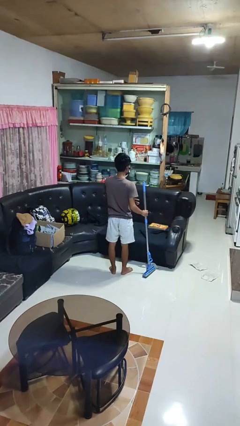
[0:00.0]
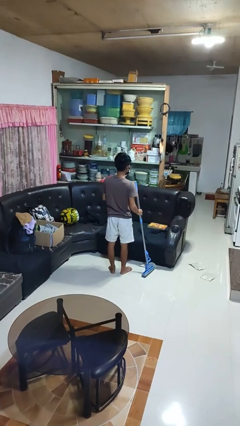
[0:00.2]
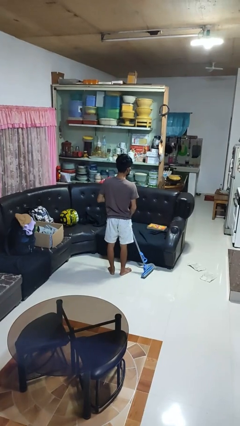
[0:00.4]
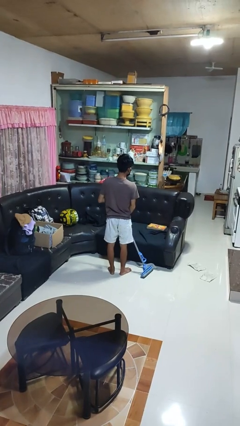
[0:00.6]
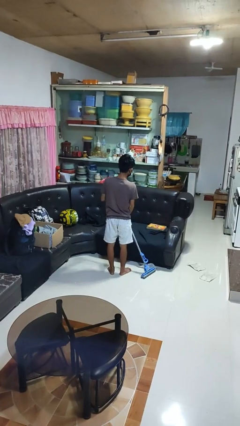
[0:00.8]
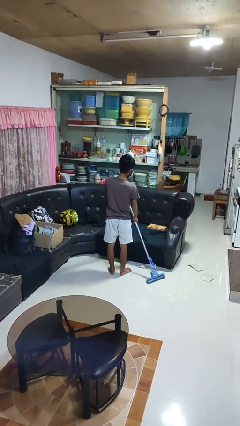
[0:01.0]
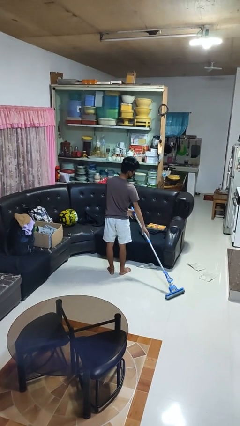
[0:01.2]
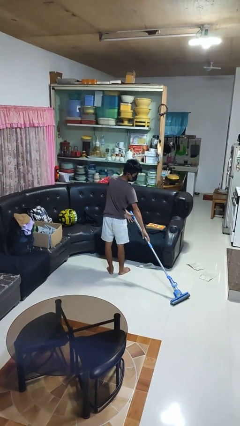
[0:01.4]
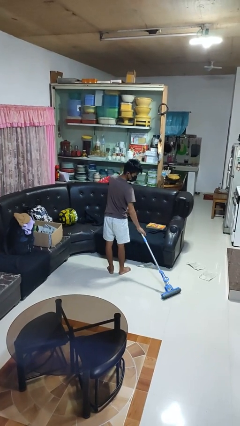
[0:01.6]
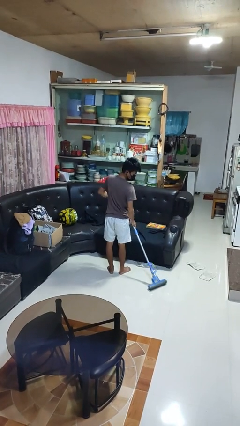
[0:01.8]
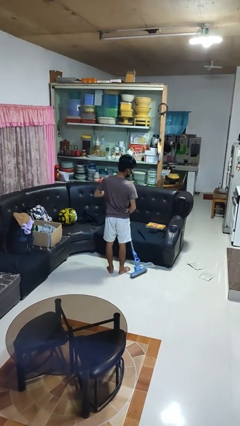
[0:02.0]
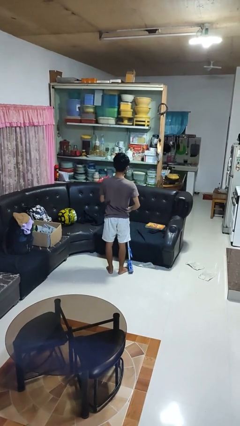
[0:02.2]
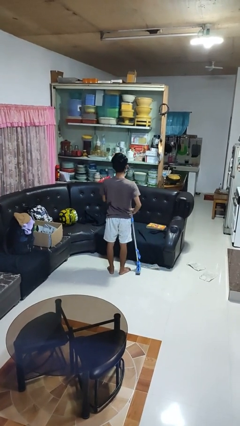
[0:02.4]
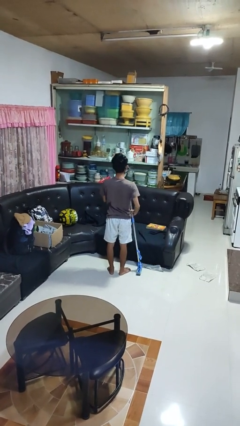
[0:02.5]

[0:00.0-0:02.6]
person mops

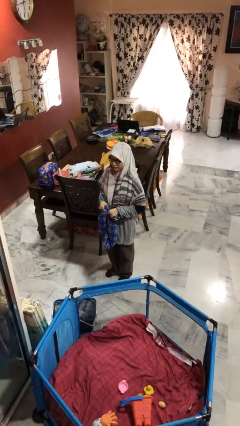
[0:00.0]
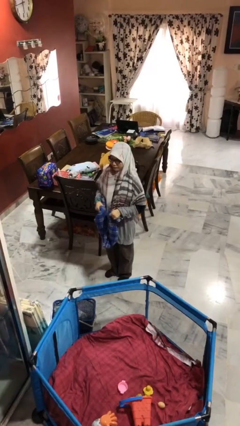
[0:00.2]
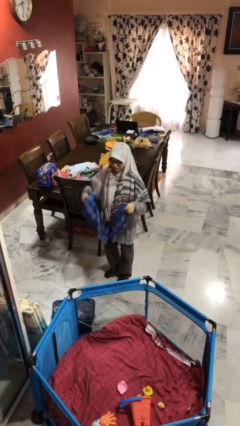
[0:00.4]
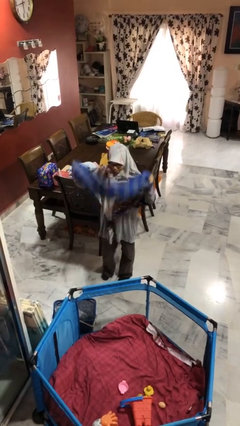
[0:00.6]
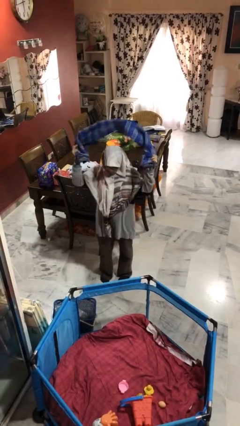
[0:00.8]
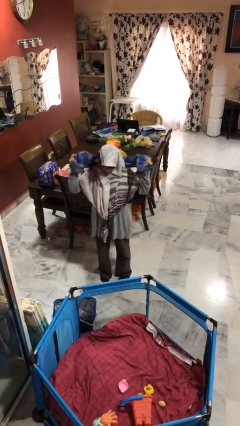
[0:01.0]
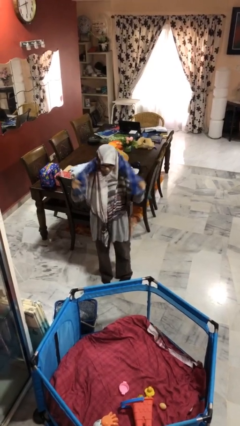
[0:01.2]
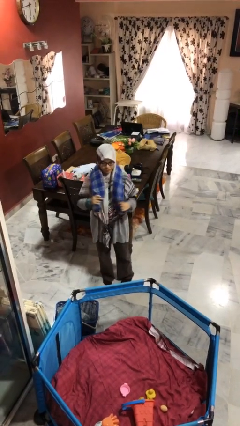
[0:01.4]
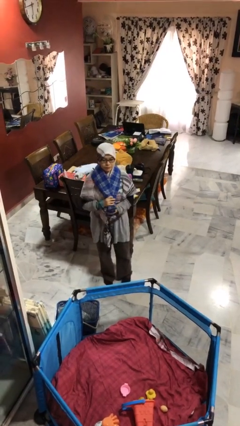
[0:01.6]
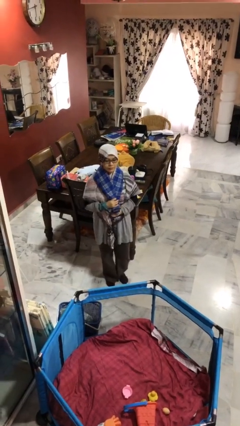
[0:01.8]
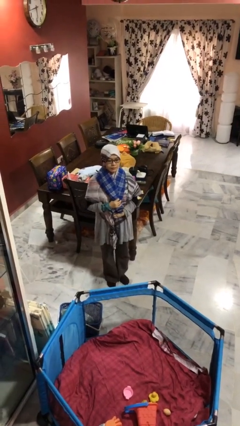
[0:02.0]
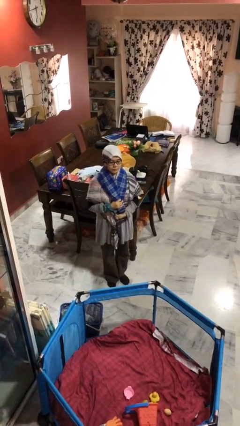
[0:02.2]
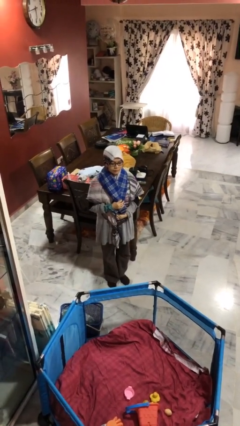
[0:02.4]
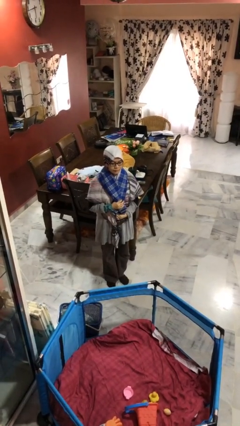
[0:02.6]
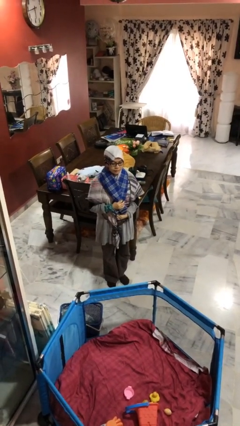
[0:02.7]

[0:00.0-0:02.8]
person puts on scarf

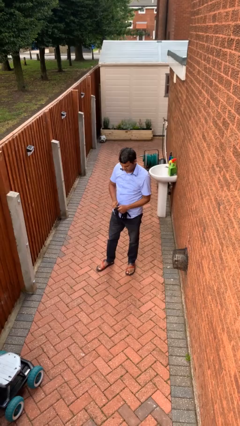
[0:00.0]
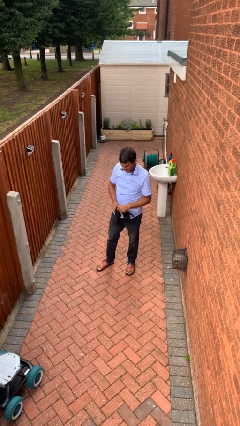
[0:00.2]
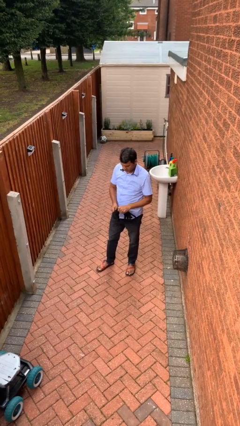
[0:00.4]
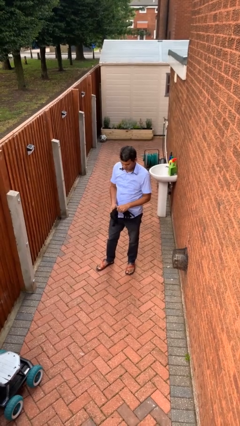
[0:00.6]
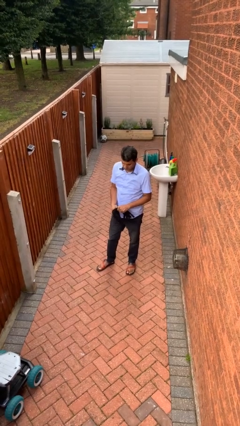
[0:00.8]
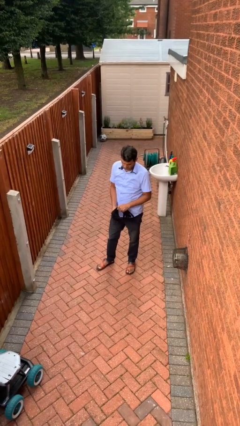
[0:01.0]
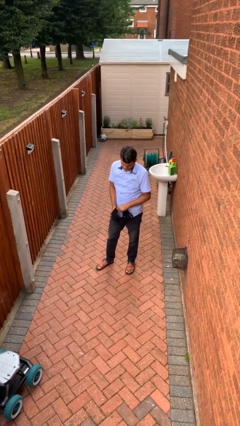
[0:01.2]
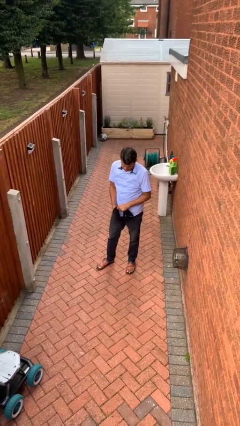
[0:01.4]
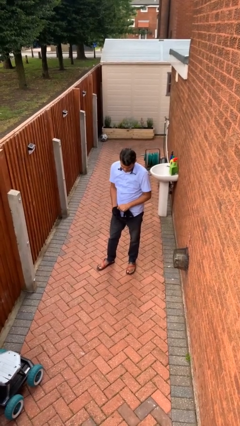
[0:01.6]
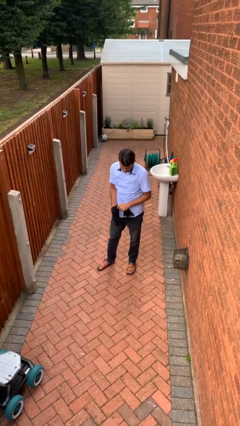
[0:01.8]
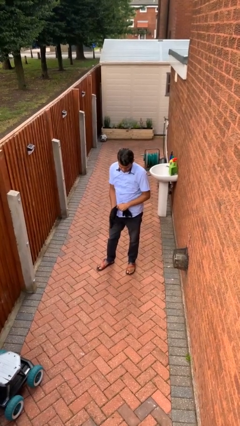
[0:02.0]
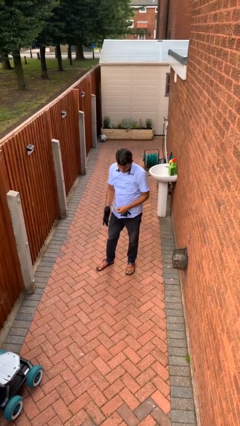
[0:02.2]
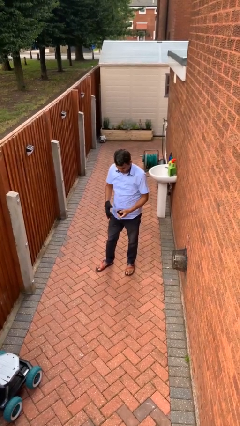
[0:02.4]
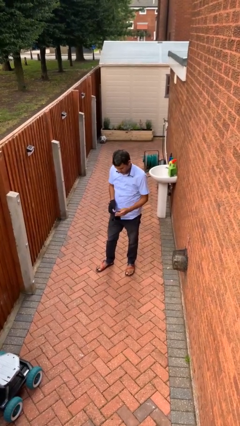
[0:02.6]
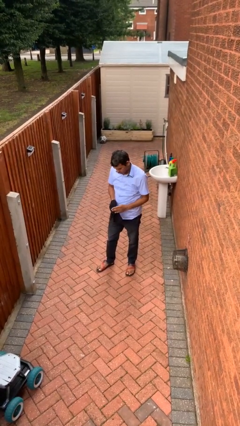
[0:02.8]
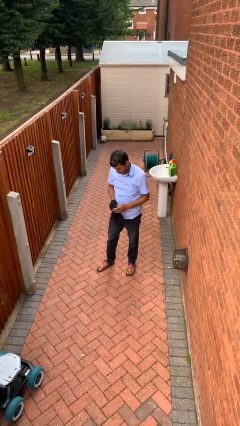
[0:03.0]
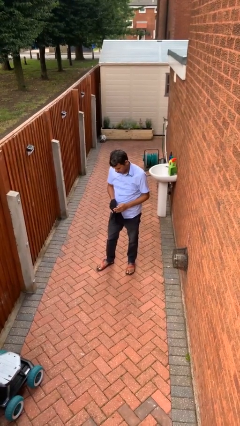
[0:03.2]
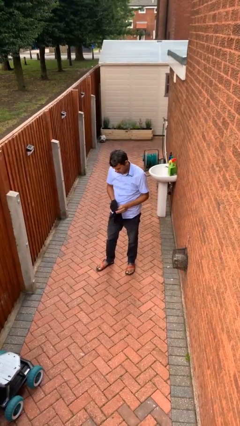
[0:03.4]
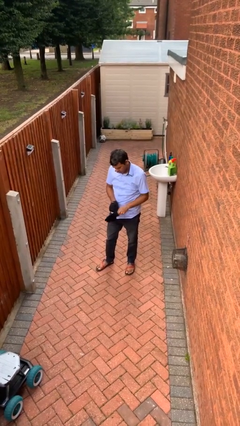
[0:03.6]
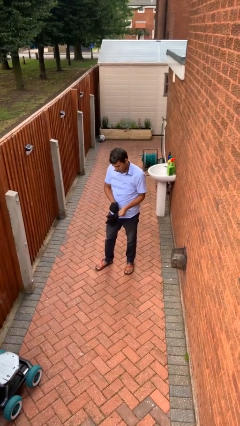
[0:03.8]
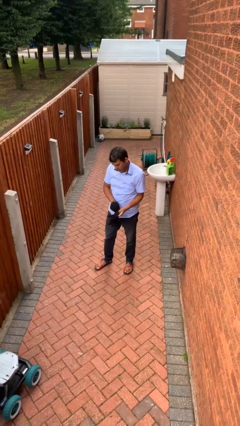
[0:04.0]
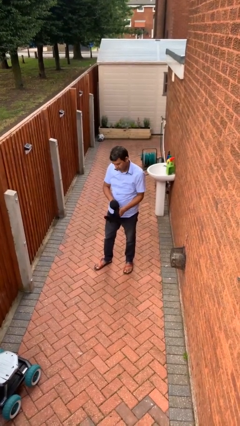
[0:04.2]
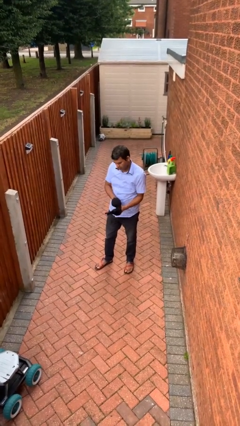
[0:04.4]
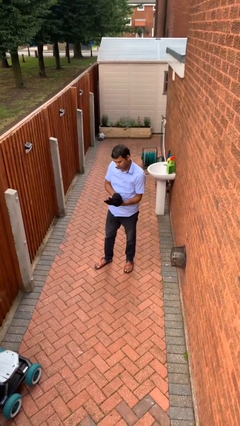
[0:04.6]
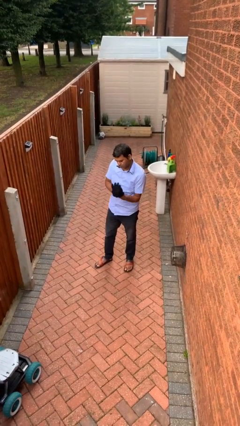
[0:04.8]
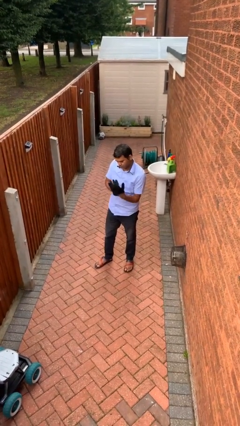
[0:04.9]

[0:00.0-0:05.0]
person puts on gloves

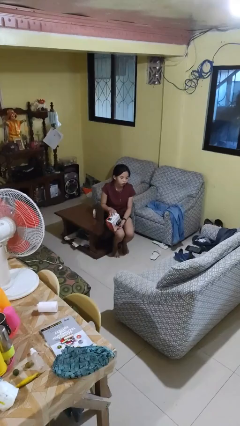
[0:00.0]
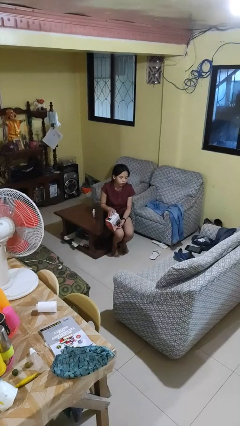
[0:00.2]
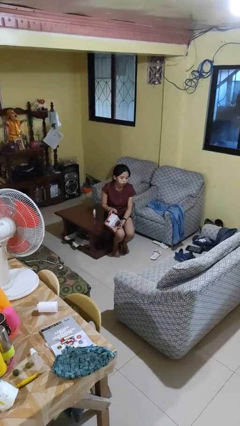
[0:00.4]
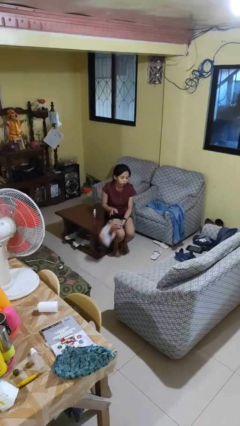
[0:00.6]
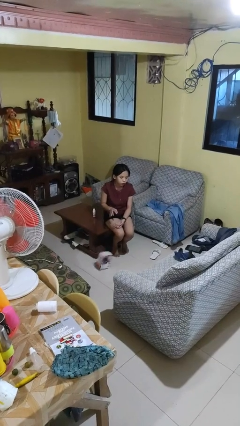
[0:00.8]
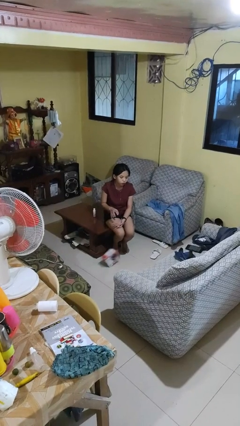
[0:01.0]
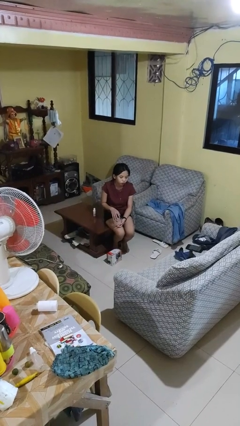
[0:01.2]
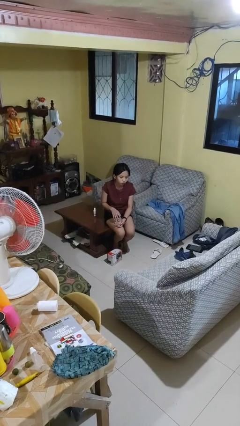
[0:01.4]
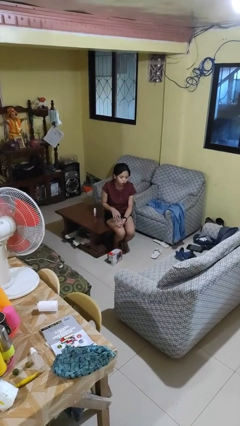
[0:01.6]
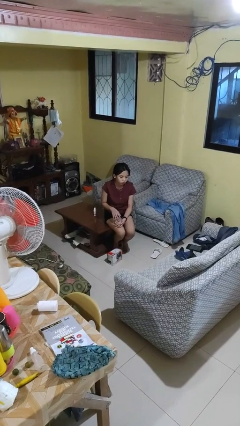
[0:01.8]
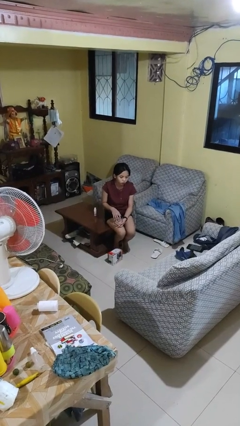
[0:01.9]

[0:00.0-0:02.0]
person drops object

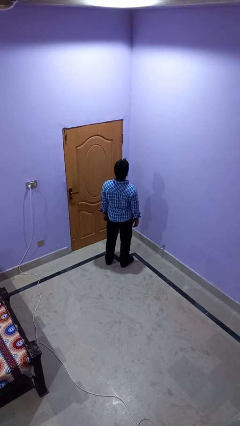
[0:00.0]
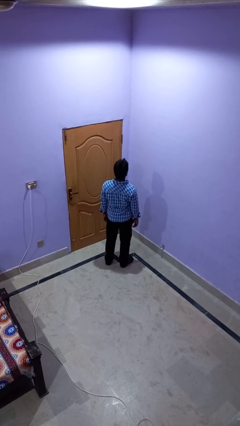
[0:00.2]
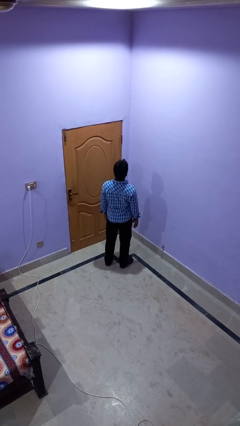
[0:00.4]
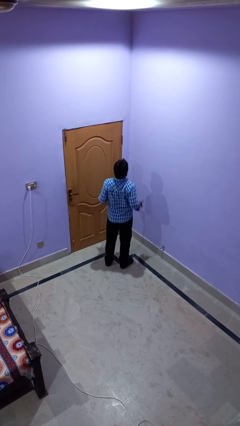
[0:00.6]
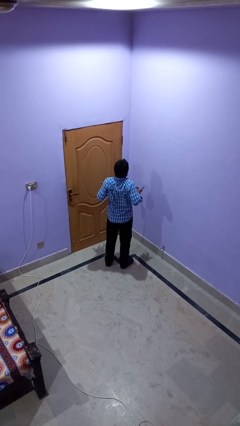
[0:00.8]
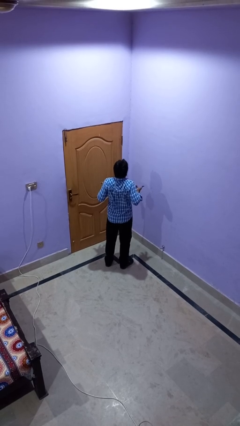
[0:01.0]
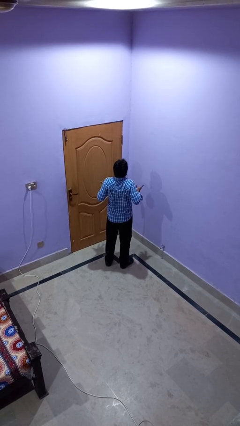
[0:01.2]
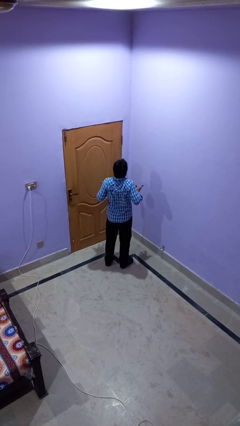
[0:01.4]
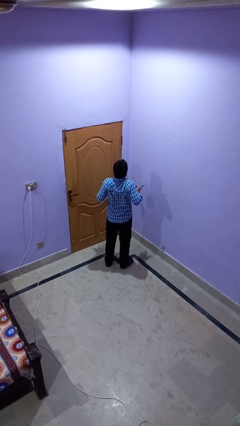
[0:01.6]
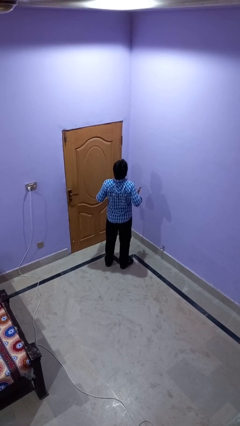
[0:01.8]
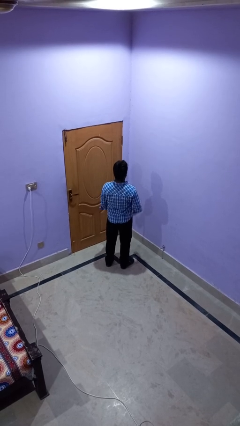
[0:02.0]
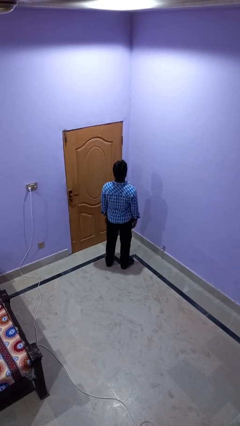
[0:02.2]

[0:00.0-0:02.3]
person shrugs

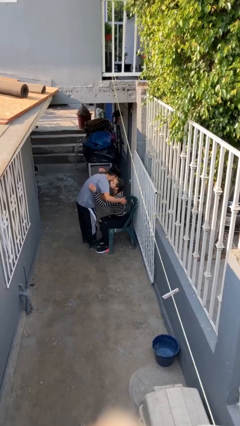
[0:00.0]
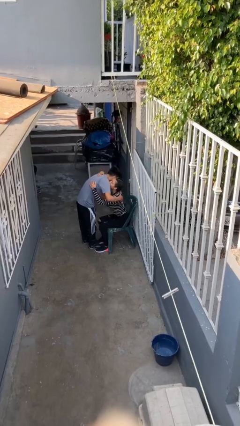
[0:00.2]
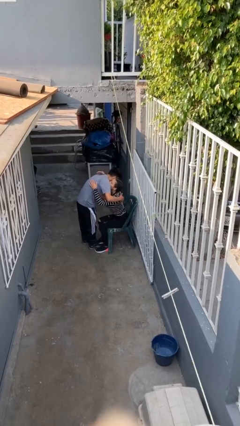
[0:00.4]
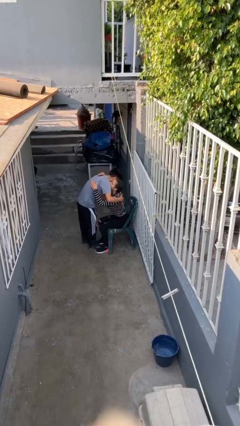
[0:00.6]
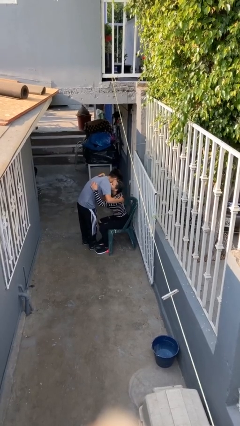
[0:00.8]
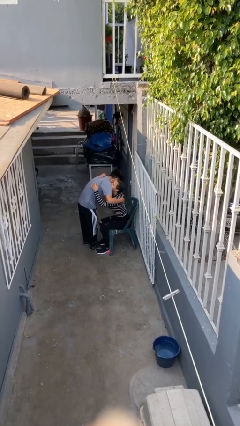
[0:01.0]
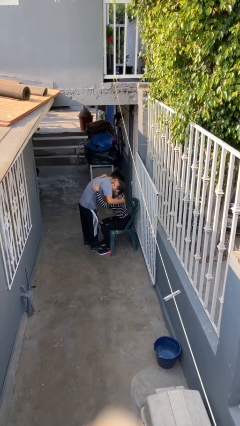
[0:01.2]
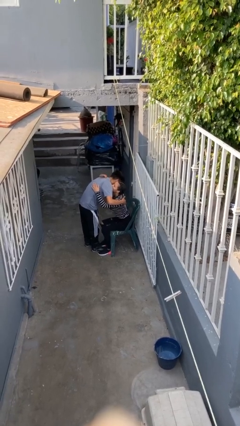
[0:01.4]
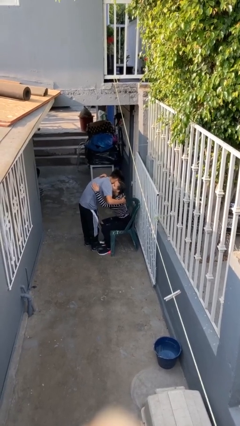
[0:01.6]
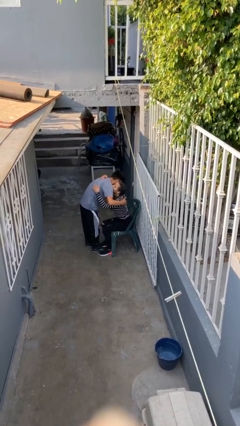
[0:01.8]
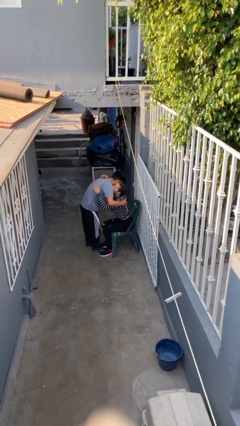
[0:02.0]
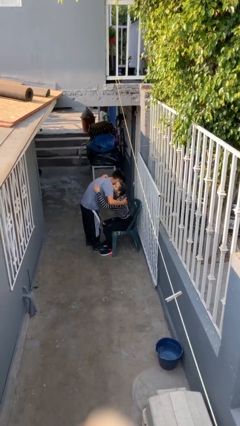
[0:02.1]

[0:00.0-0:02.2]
person embraces person

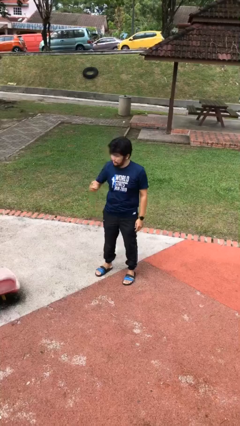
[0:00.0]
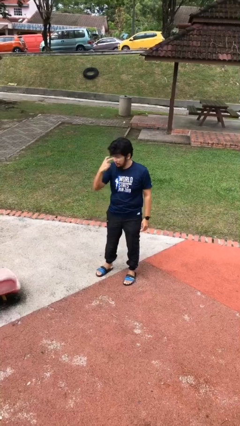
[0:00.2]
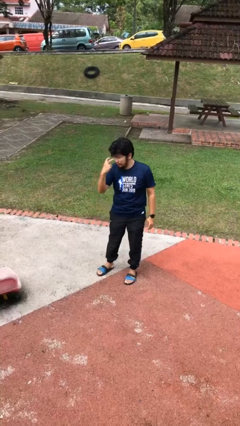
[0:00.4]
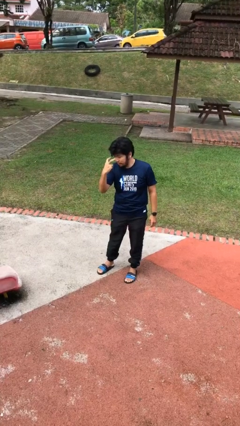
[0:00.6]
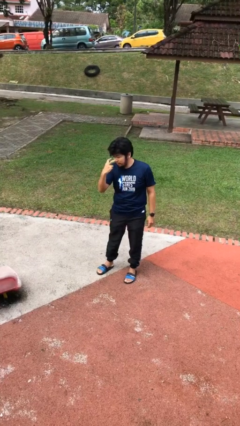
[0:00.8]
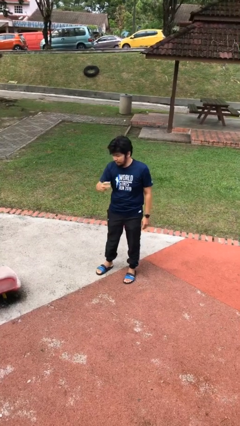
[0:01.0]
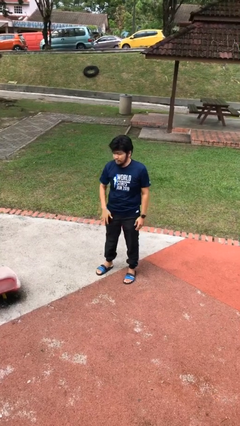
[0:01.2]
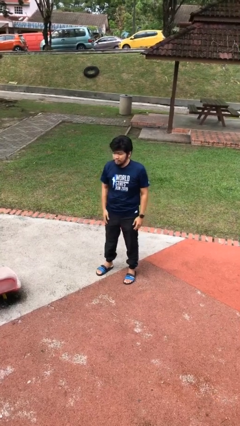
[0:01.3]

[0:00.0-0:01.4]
person gestures watch closely
